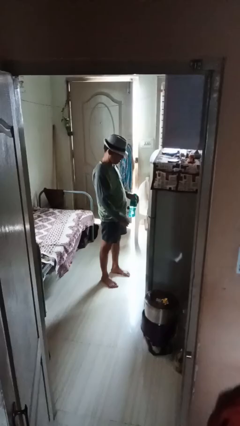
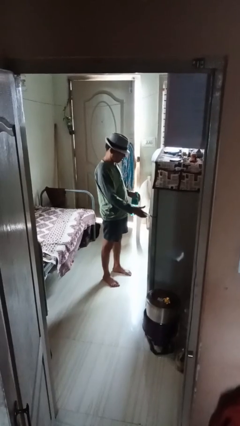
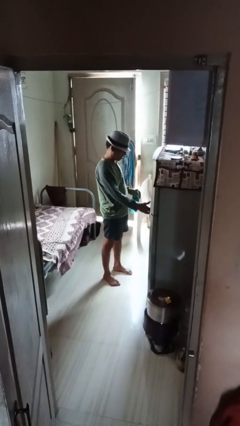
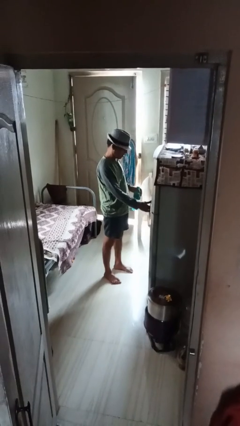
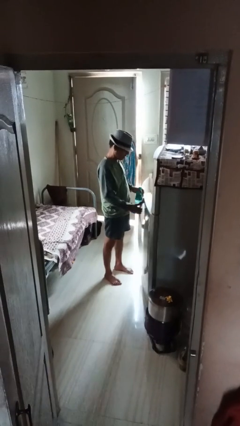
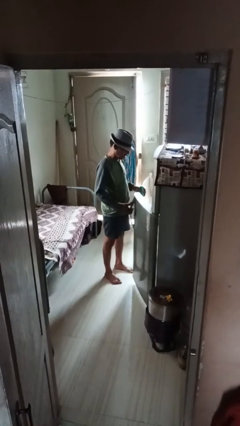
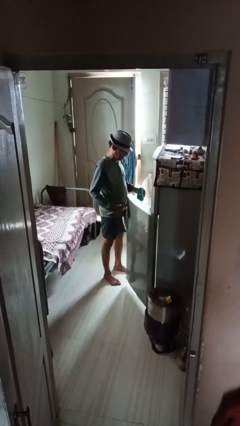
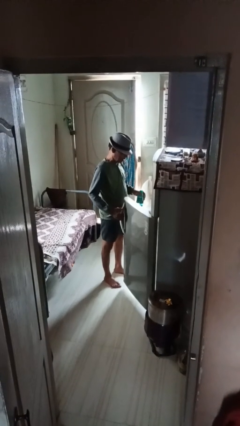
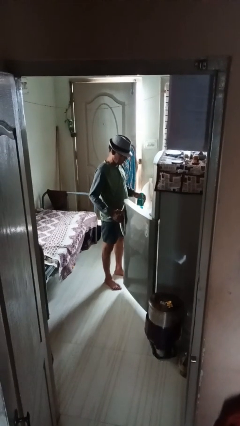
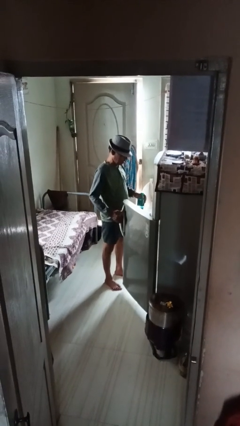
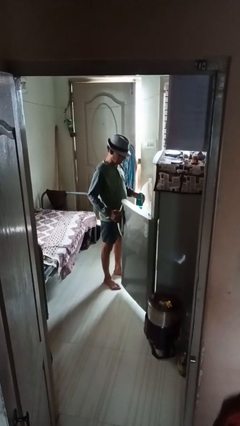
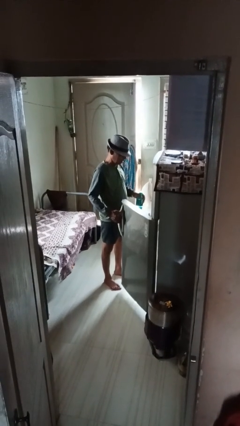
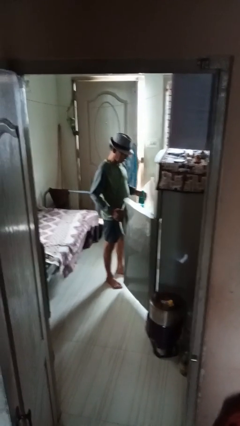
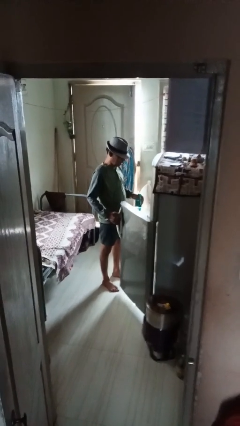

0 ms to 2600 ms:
person opens refrigerator

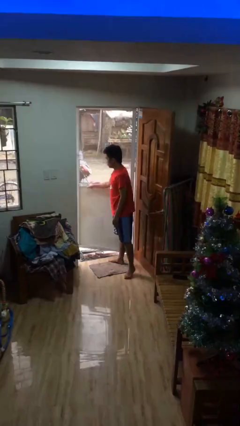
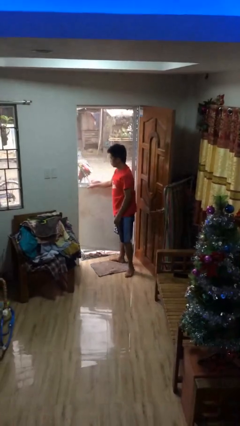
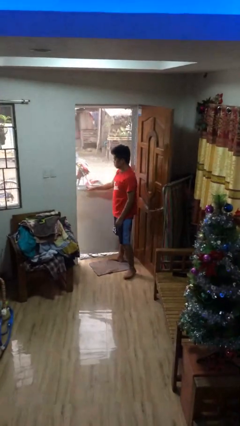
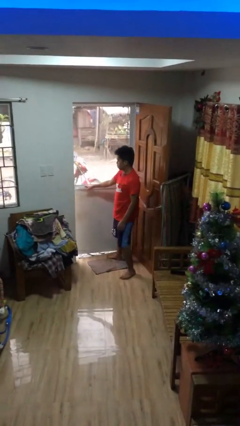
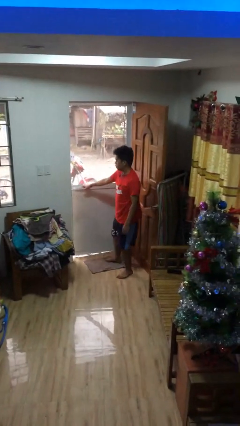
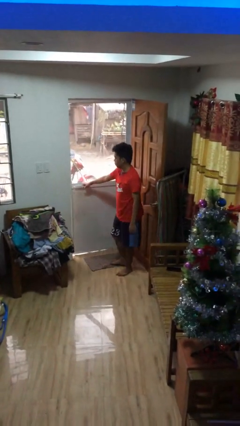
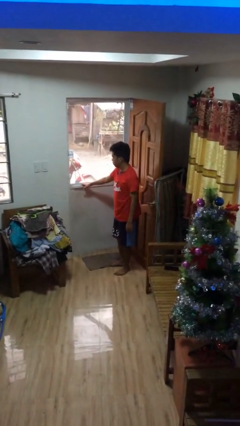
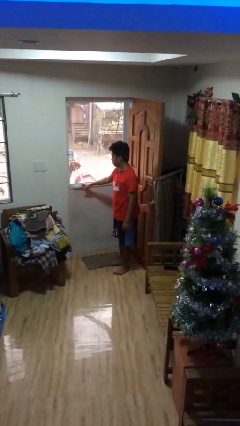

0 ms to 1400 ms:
person closes facility door

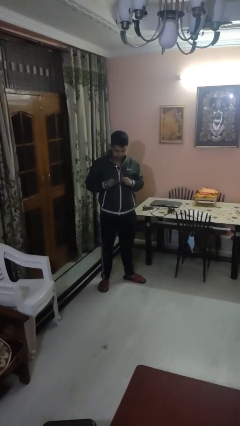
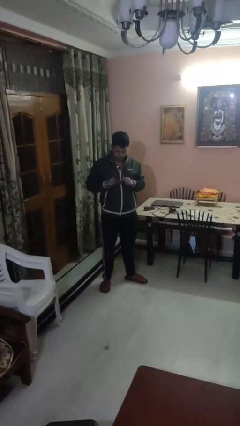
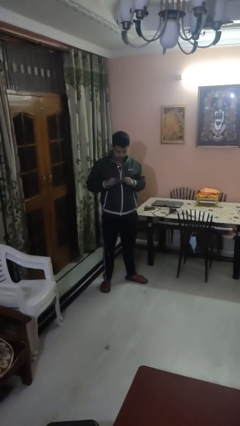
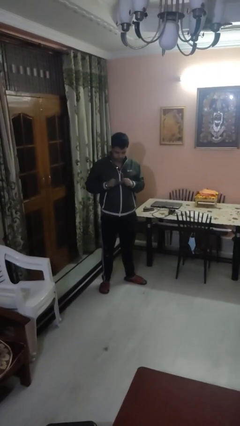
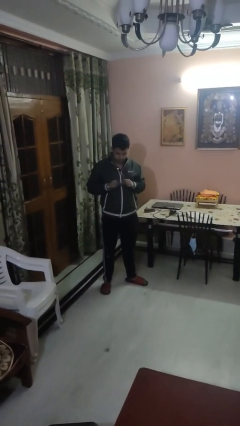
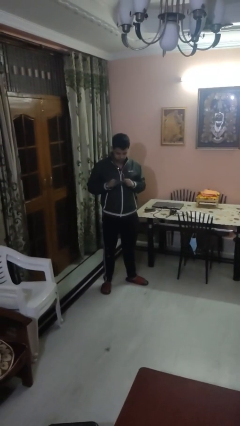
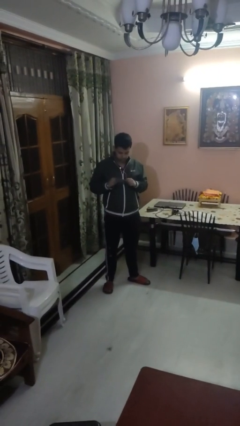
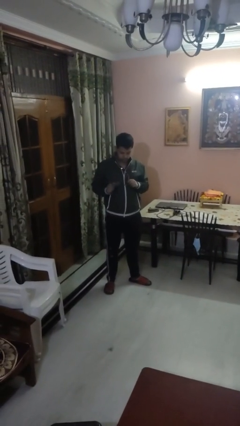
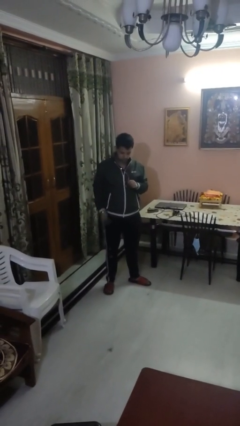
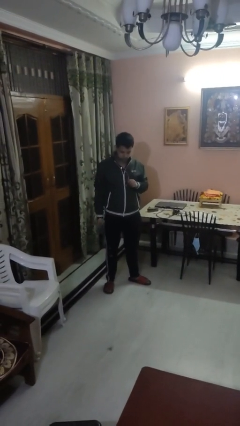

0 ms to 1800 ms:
person cleans eyeglasses

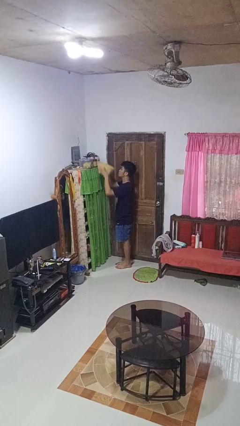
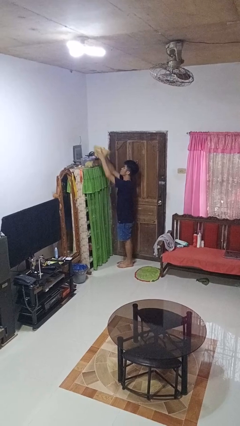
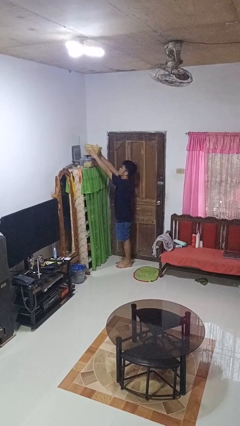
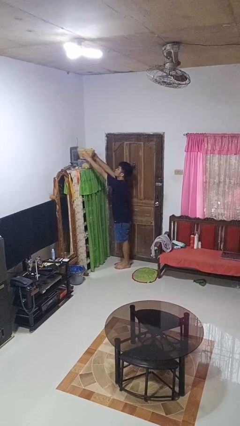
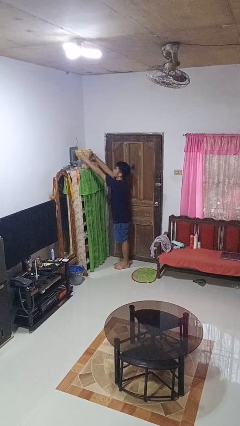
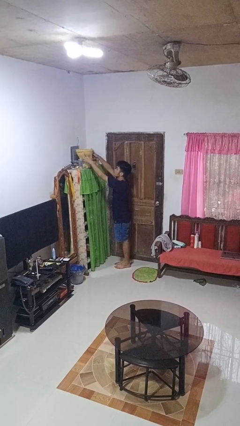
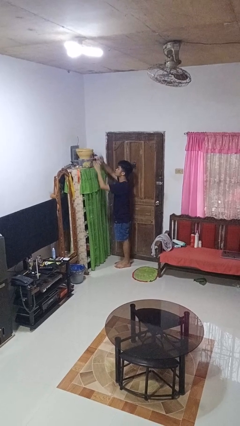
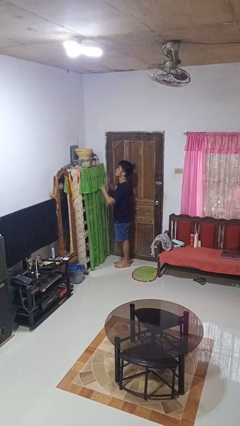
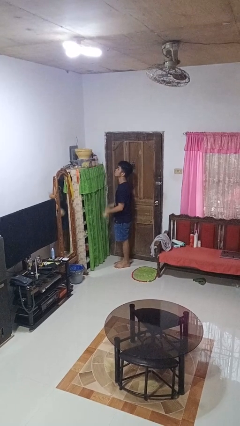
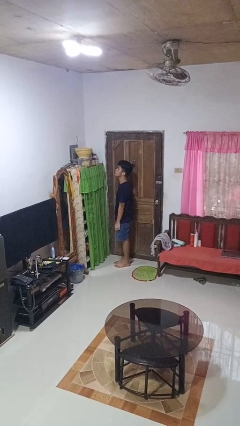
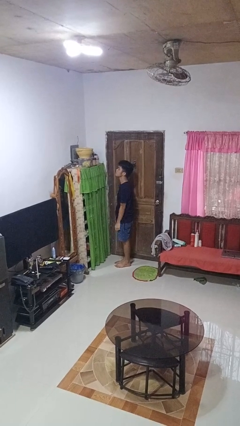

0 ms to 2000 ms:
person puts down object on shelf

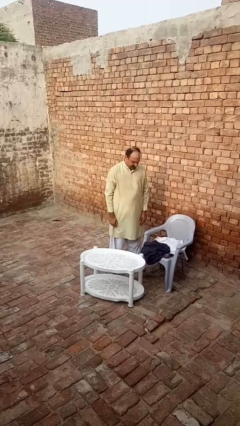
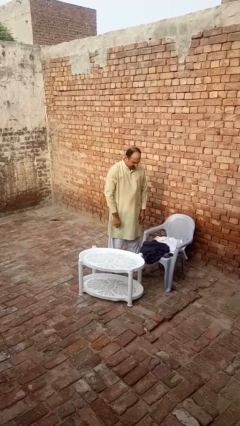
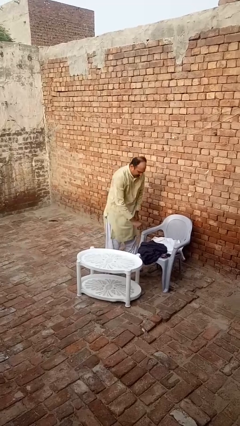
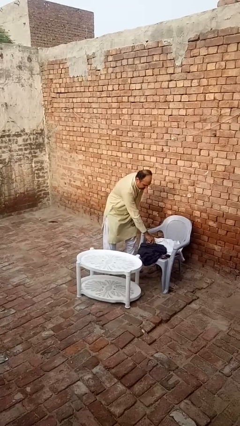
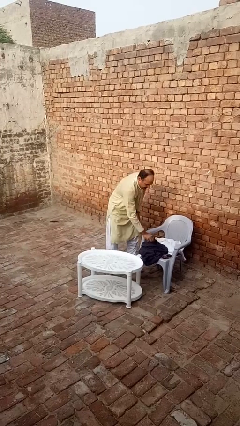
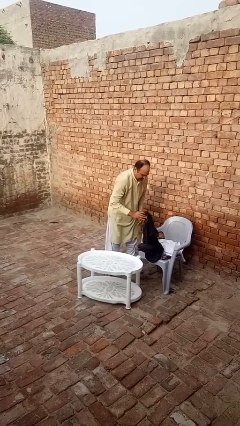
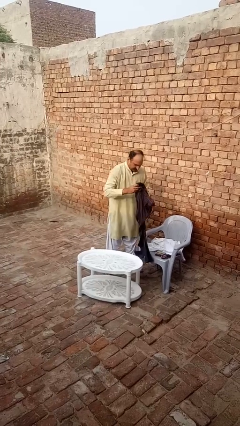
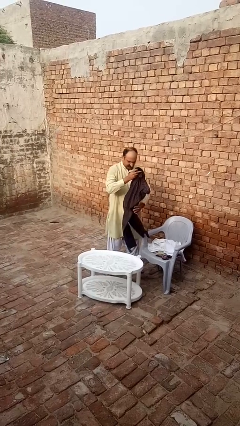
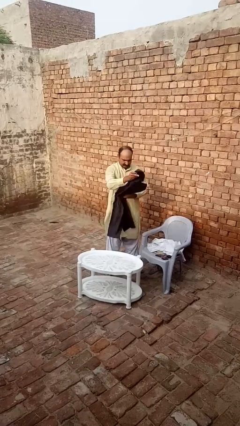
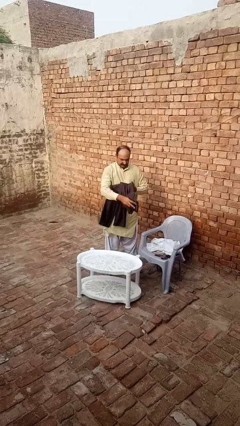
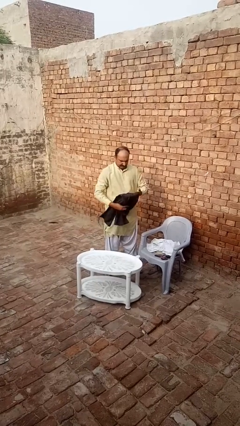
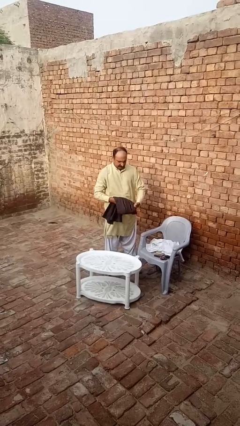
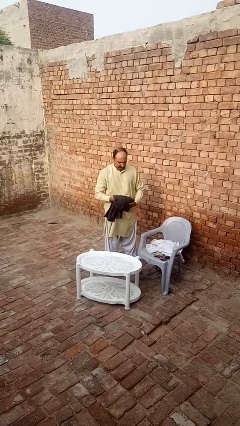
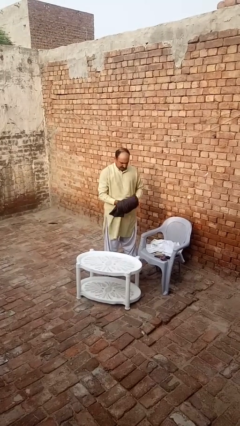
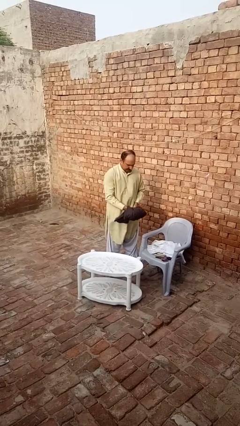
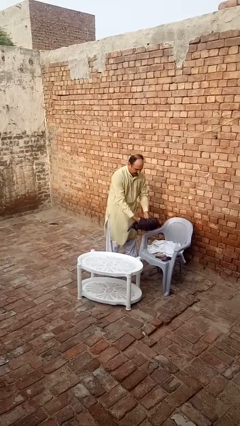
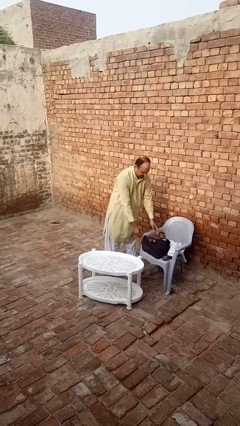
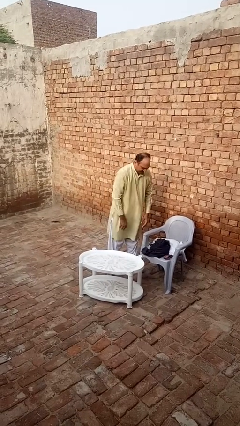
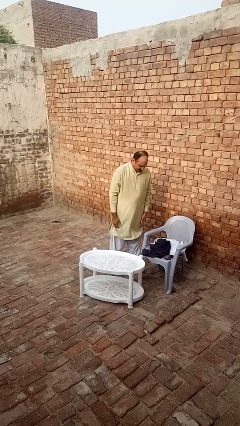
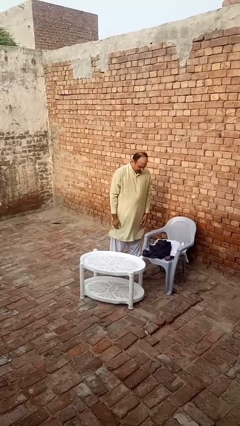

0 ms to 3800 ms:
person folds pants

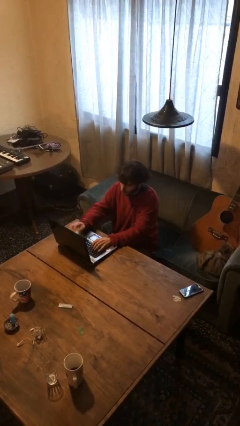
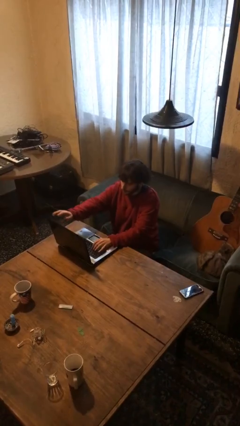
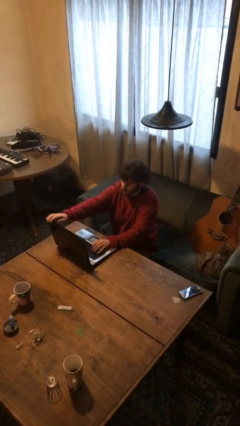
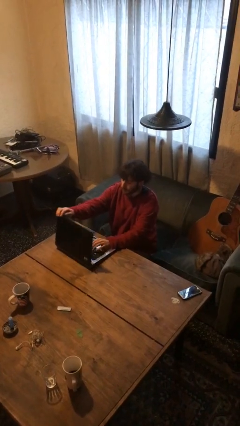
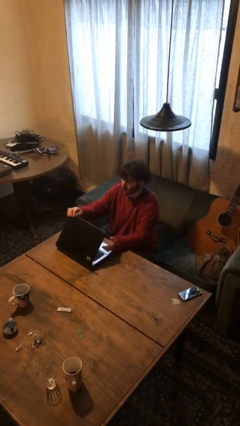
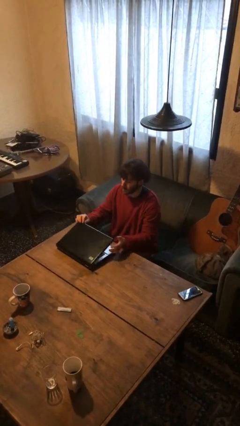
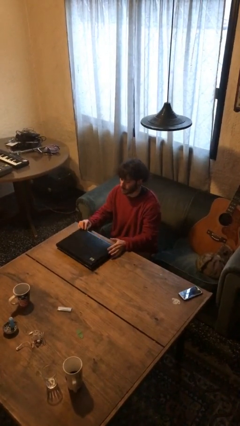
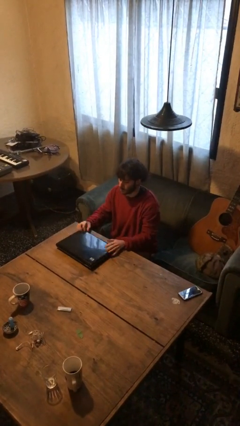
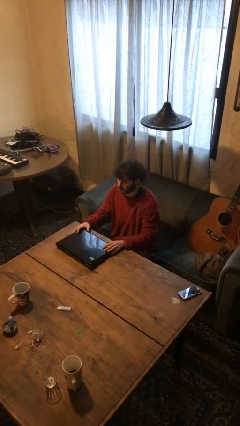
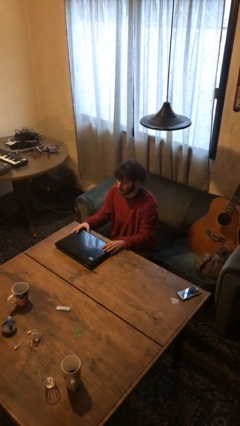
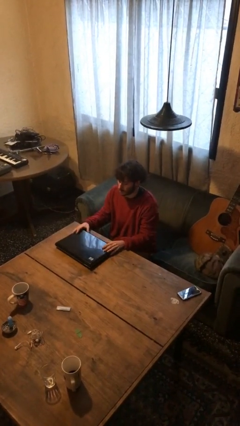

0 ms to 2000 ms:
person closes laptop

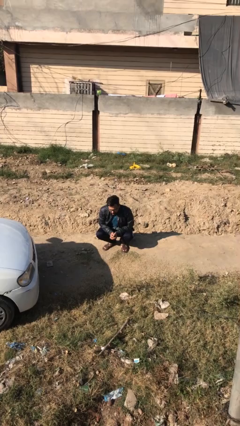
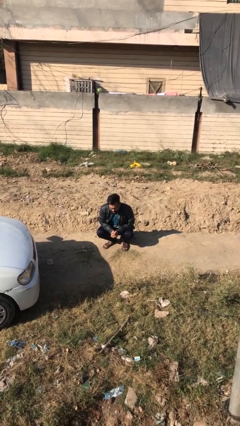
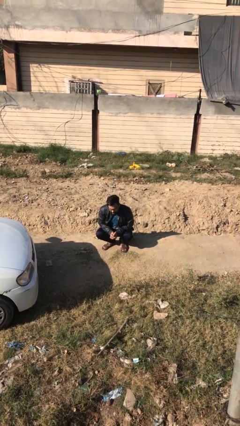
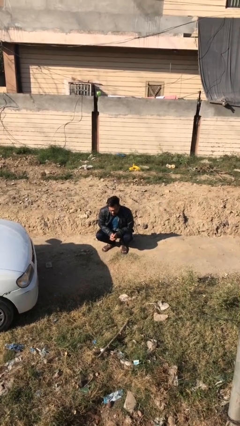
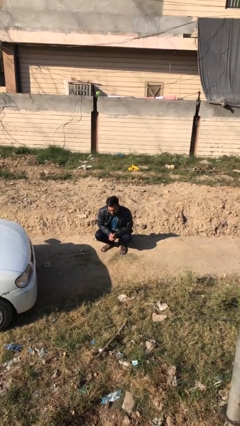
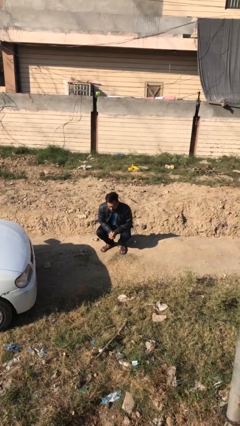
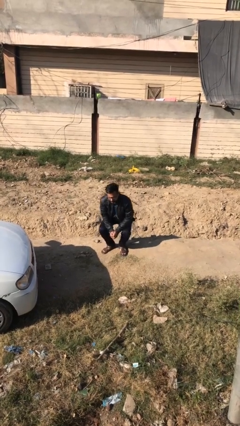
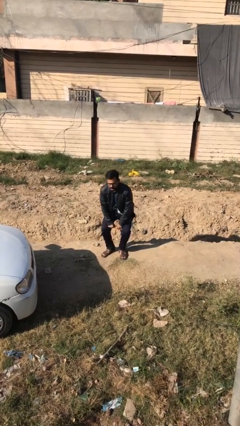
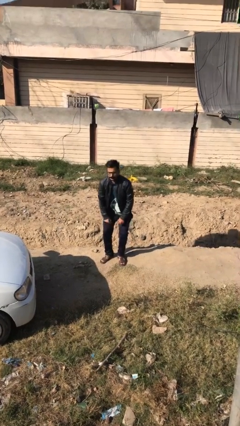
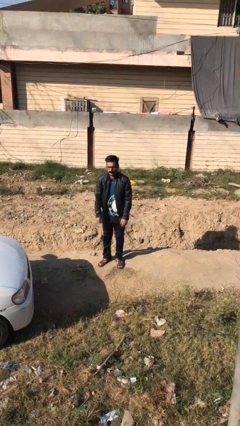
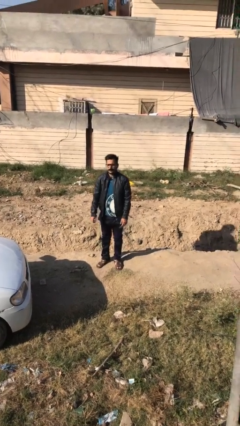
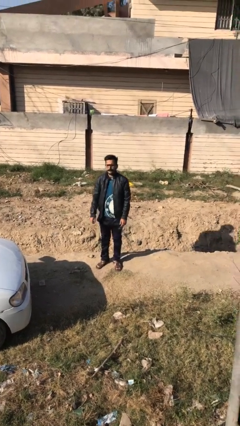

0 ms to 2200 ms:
person stands up

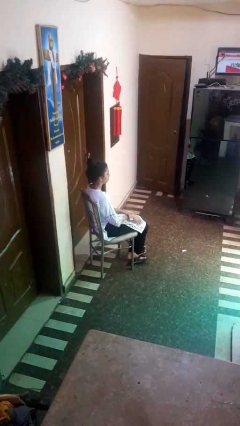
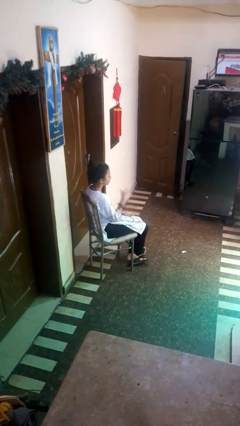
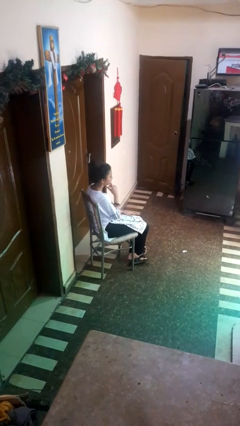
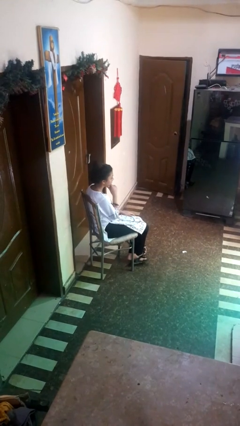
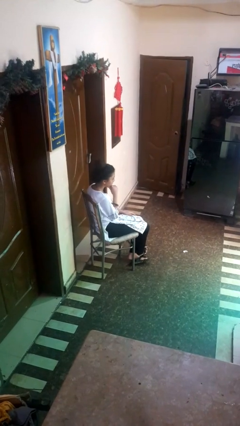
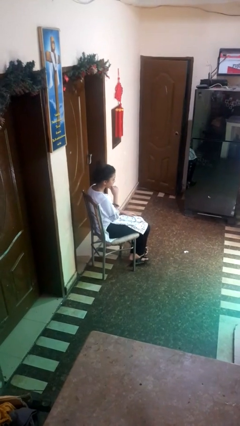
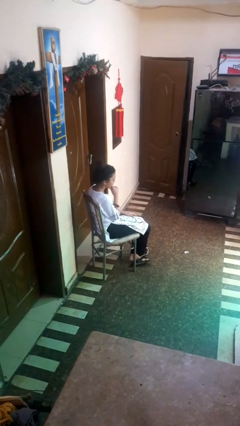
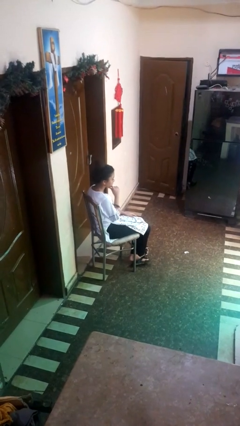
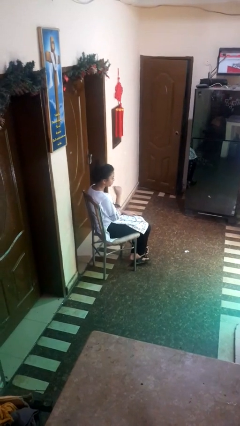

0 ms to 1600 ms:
person strokes chin
